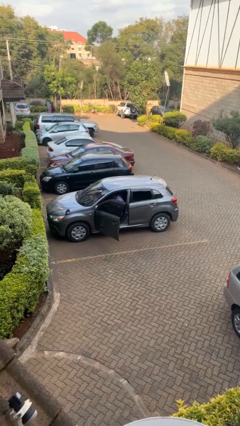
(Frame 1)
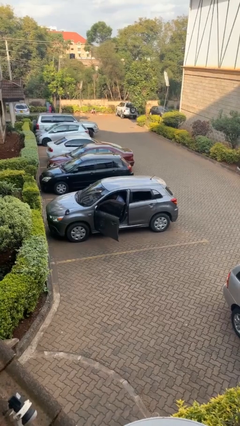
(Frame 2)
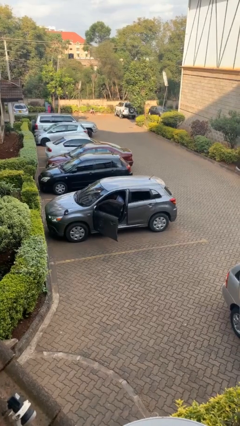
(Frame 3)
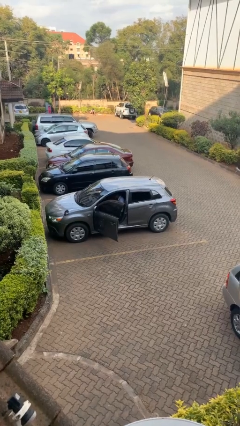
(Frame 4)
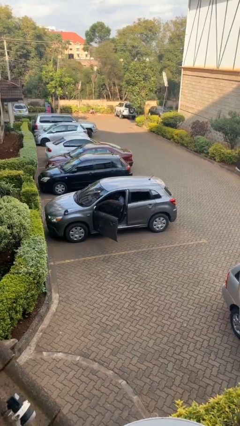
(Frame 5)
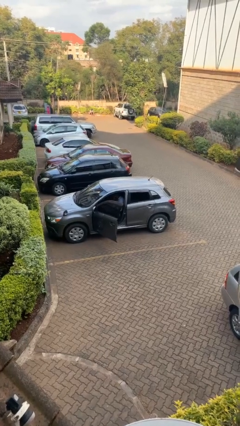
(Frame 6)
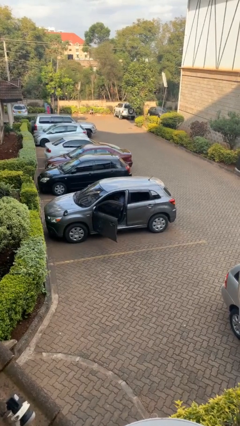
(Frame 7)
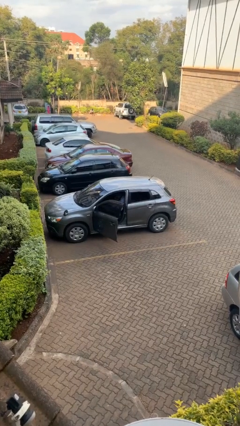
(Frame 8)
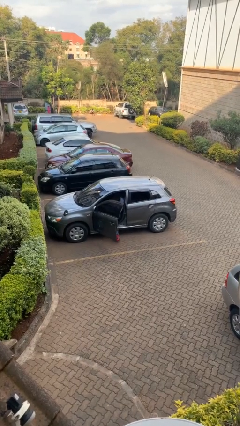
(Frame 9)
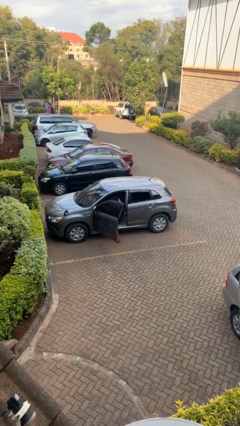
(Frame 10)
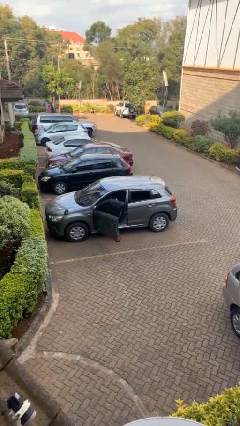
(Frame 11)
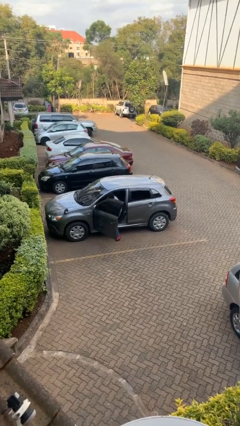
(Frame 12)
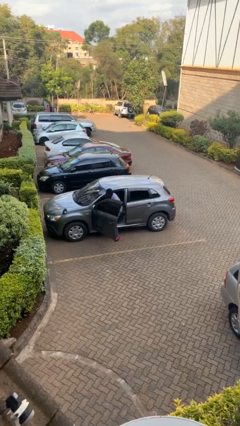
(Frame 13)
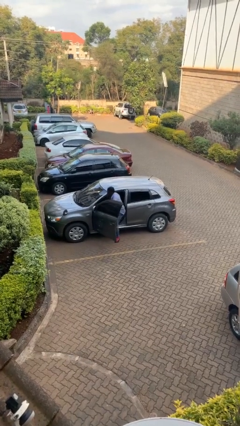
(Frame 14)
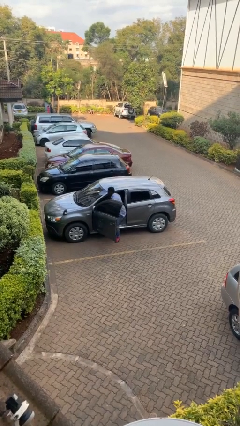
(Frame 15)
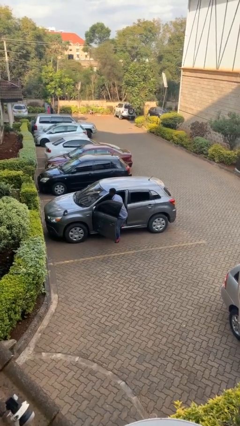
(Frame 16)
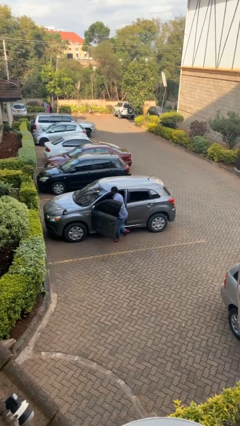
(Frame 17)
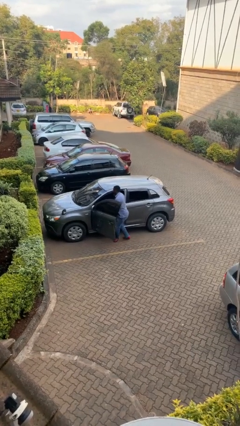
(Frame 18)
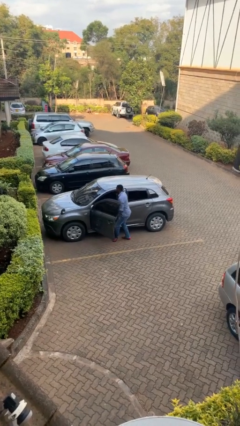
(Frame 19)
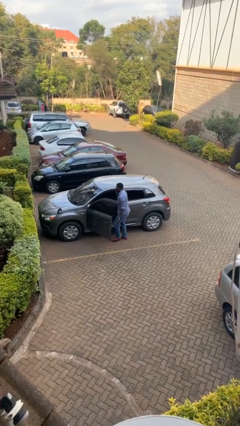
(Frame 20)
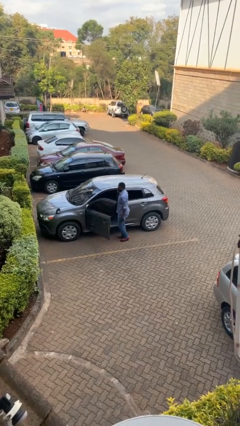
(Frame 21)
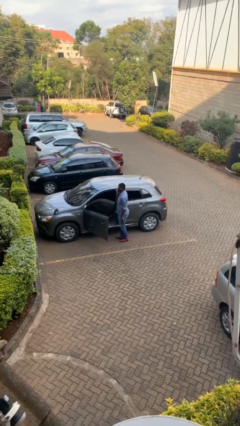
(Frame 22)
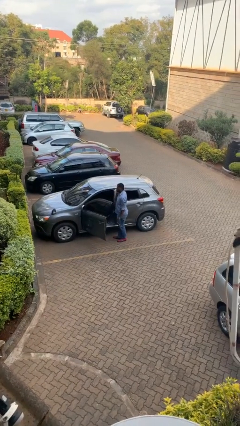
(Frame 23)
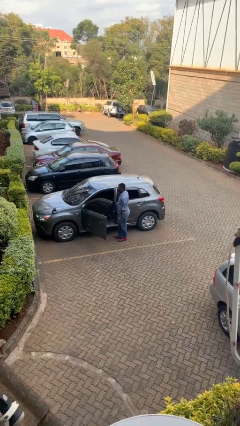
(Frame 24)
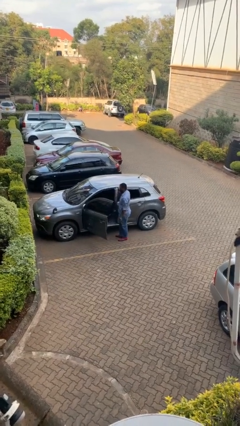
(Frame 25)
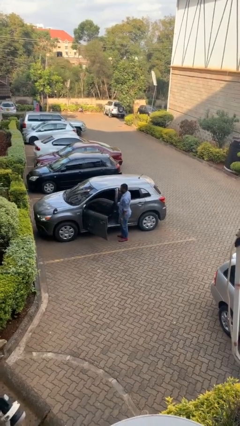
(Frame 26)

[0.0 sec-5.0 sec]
person exits car

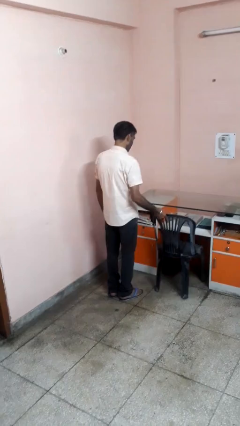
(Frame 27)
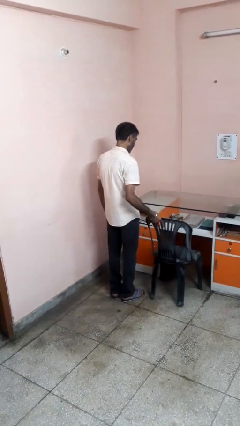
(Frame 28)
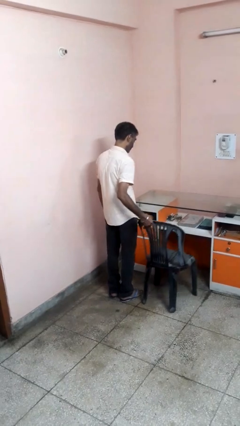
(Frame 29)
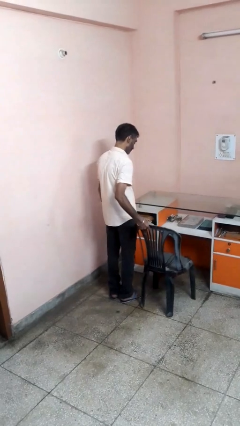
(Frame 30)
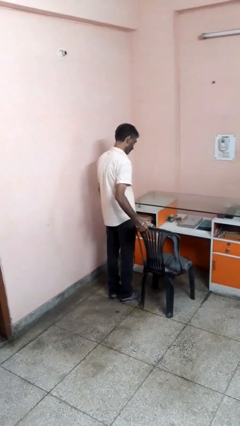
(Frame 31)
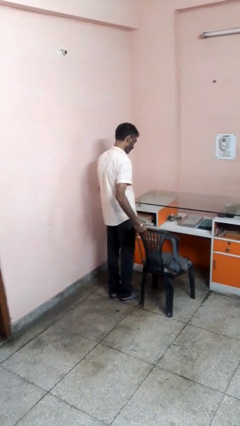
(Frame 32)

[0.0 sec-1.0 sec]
person pulls out chair

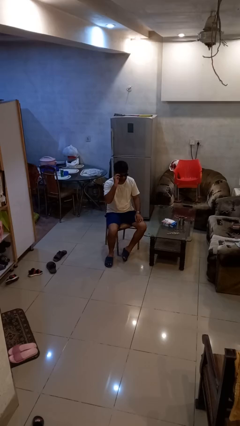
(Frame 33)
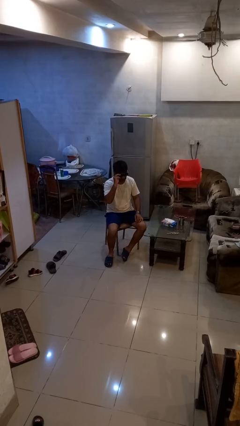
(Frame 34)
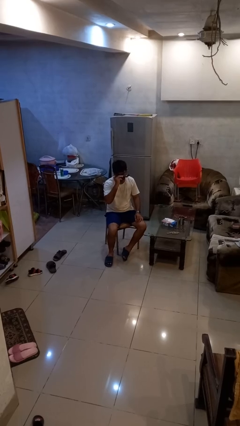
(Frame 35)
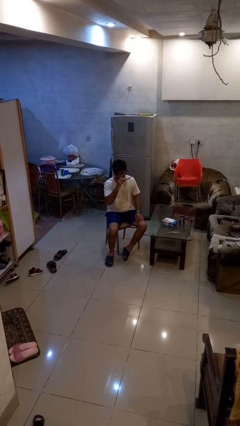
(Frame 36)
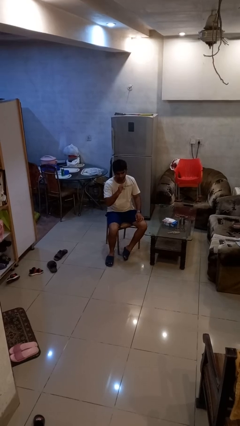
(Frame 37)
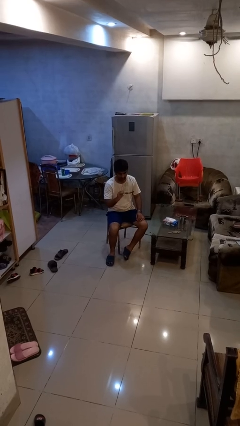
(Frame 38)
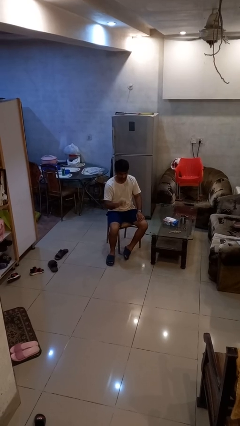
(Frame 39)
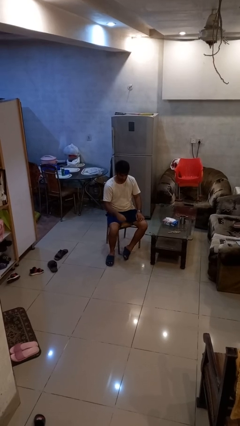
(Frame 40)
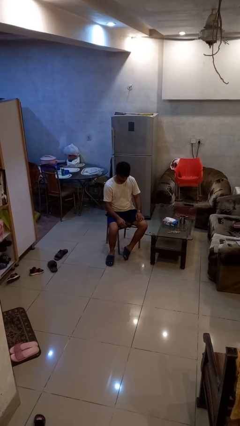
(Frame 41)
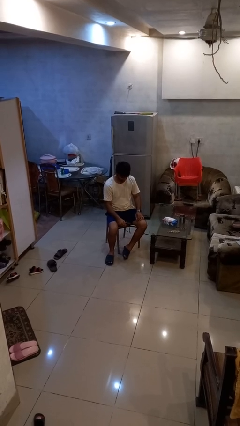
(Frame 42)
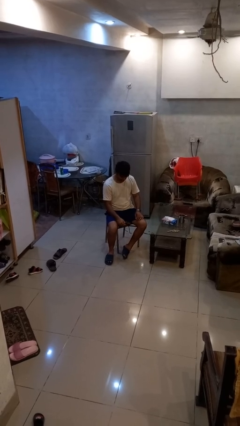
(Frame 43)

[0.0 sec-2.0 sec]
person takes off sunglasses

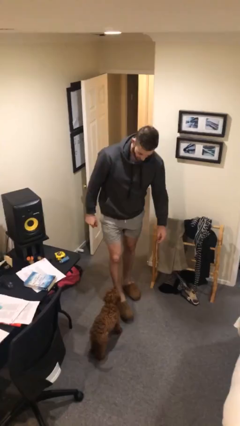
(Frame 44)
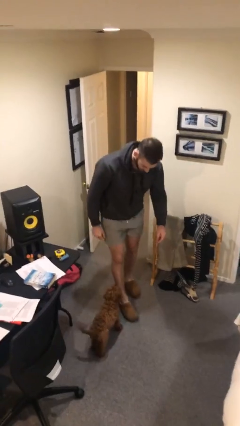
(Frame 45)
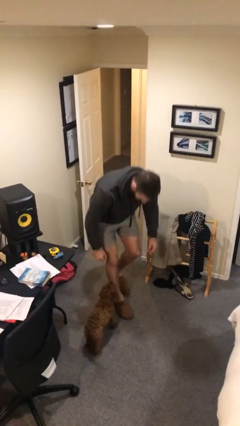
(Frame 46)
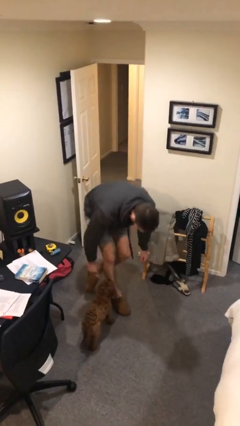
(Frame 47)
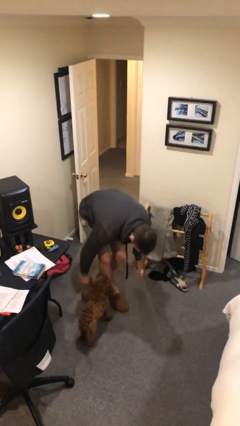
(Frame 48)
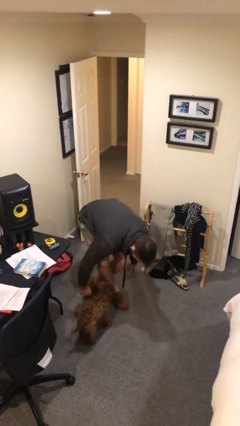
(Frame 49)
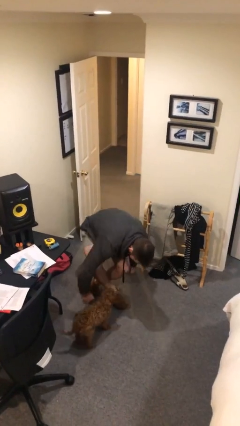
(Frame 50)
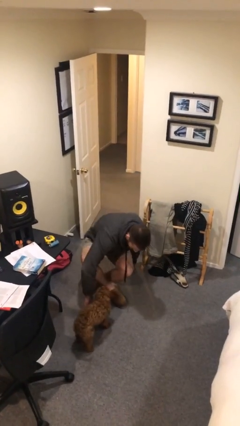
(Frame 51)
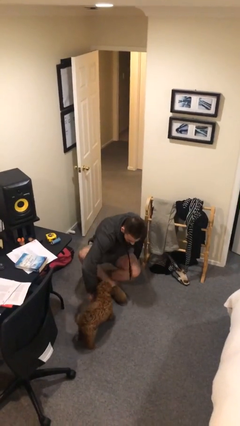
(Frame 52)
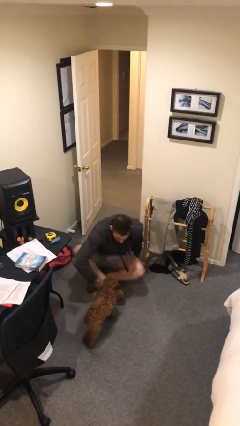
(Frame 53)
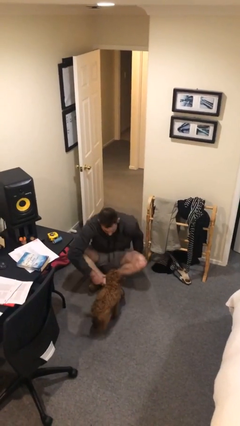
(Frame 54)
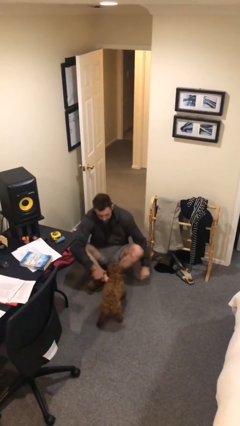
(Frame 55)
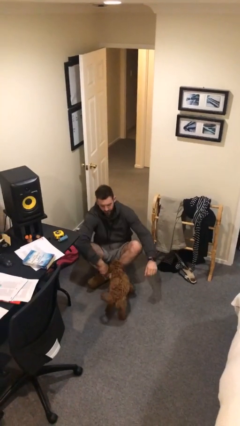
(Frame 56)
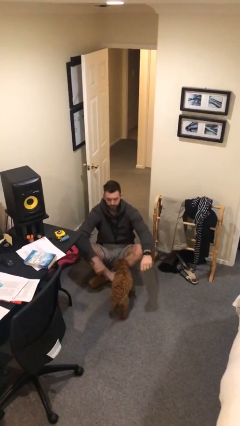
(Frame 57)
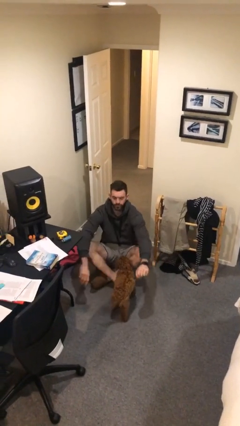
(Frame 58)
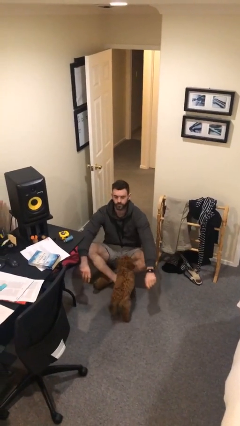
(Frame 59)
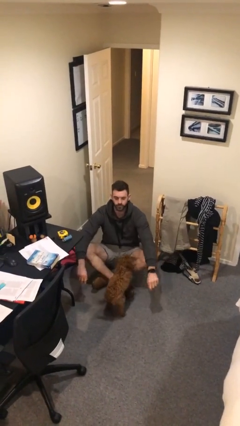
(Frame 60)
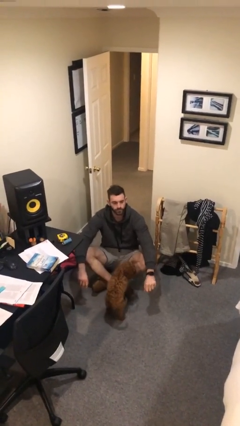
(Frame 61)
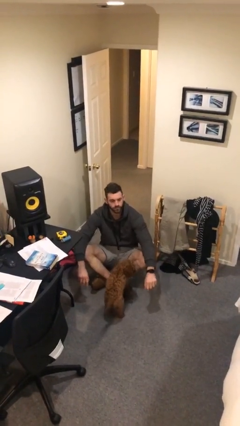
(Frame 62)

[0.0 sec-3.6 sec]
person sits crisscross

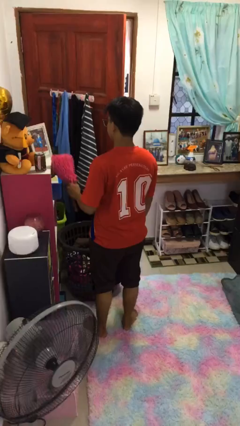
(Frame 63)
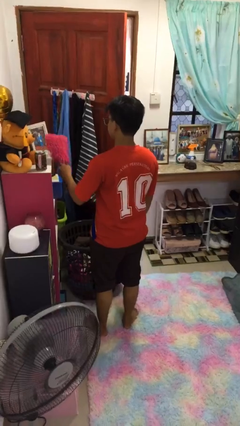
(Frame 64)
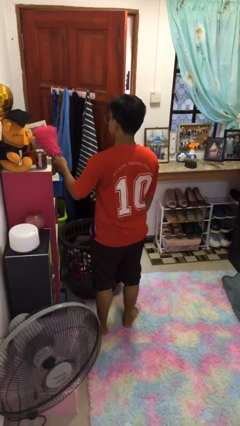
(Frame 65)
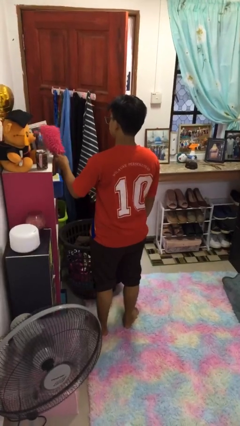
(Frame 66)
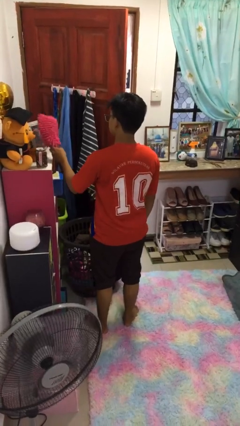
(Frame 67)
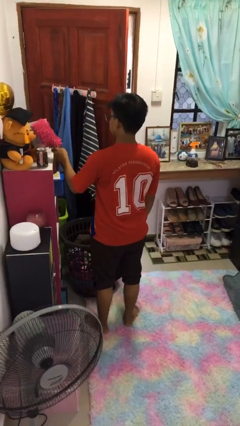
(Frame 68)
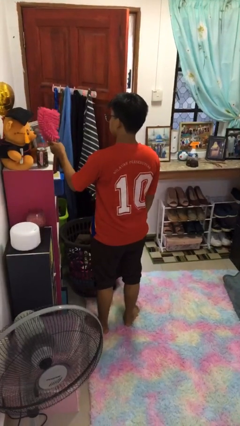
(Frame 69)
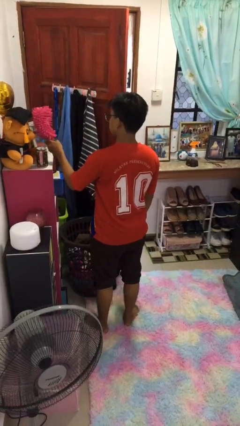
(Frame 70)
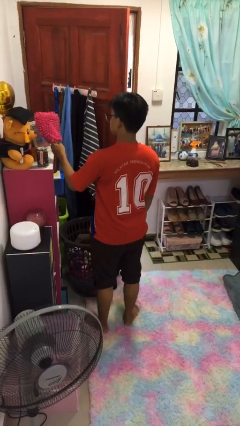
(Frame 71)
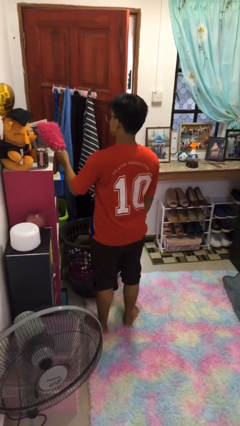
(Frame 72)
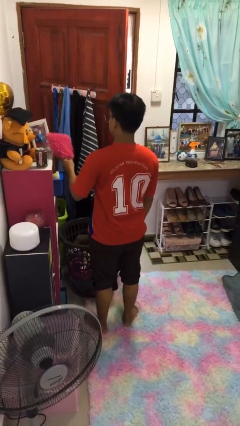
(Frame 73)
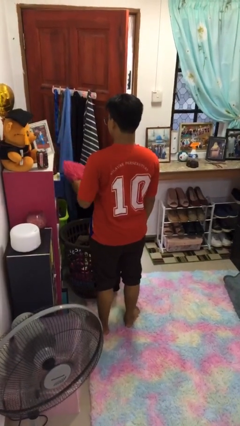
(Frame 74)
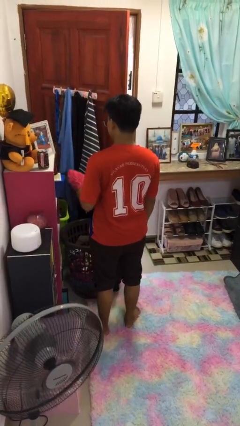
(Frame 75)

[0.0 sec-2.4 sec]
person dusts furniture

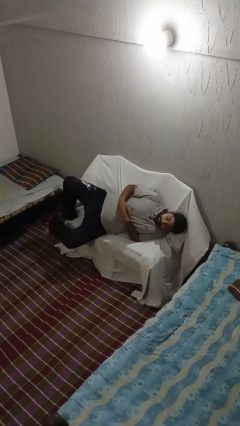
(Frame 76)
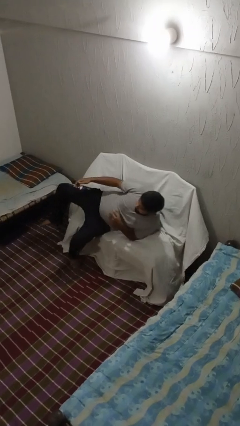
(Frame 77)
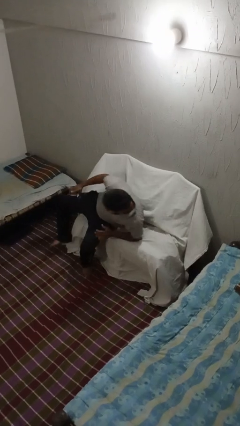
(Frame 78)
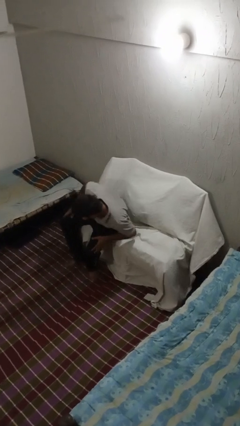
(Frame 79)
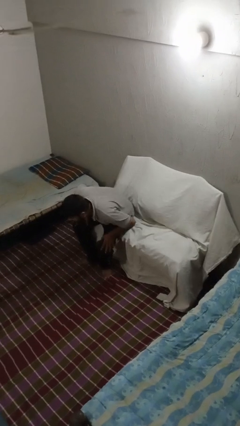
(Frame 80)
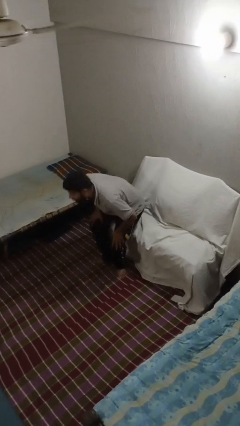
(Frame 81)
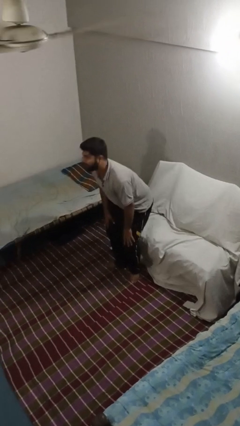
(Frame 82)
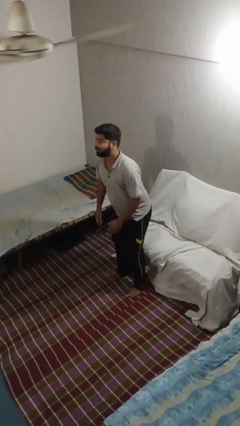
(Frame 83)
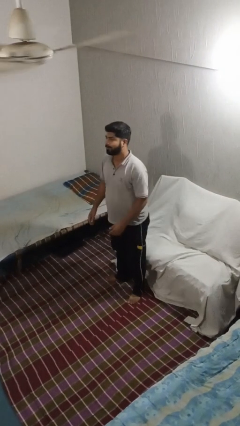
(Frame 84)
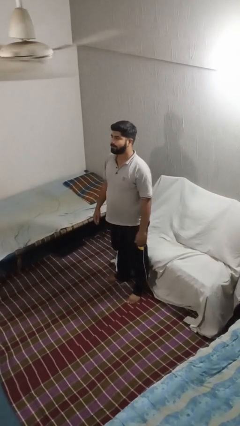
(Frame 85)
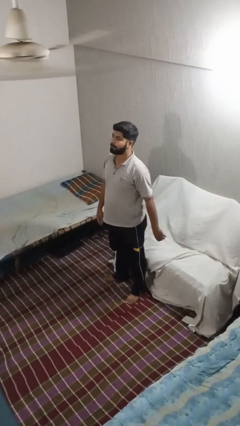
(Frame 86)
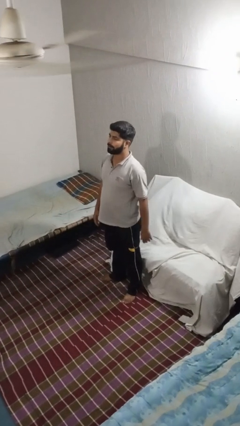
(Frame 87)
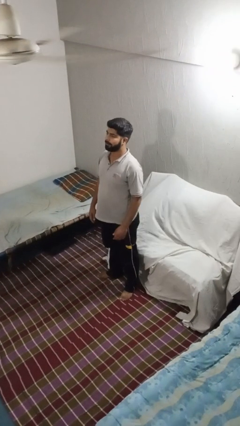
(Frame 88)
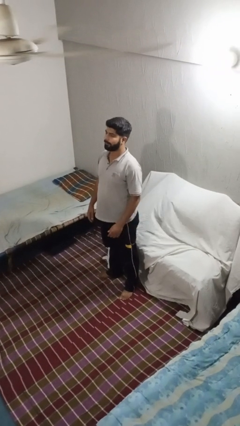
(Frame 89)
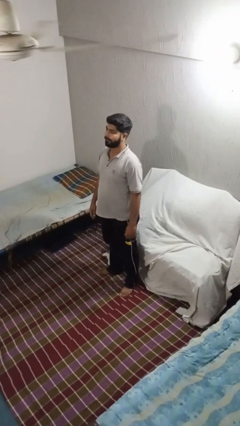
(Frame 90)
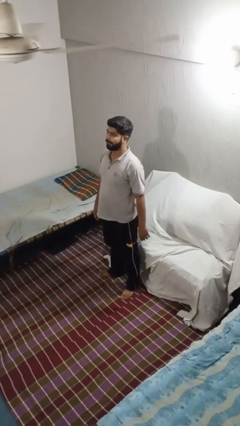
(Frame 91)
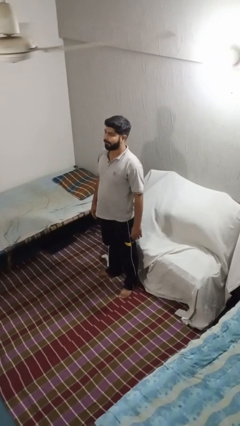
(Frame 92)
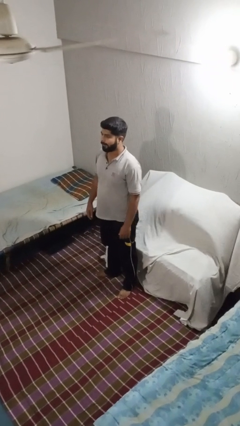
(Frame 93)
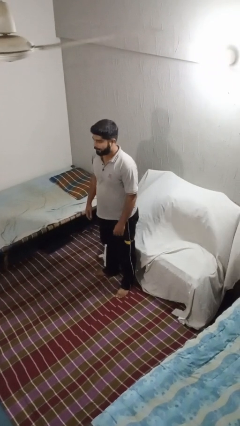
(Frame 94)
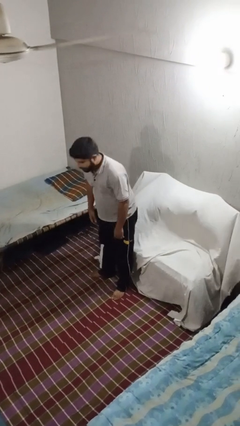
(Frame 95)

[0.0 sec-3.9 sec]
person stands up
